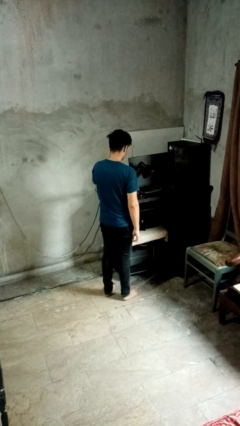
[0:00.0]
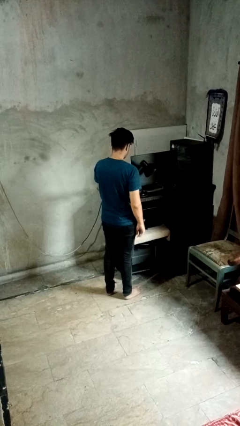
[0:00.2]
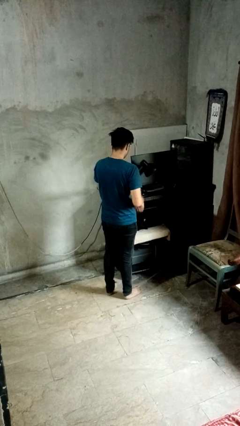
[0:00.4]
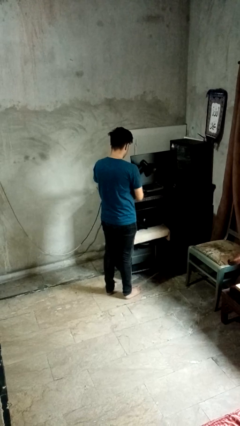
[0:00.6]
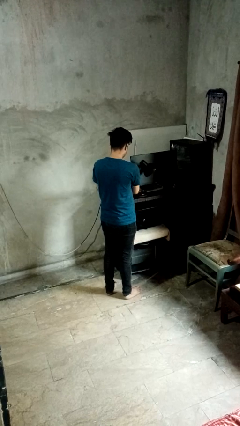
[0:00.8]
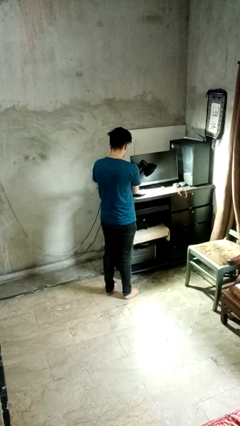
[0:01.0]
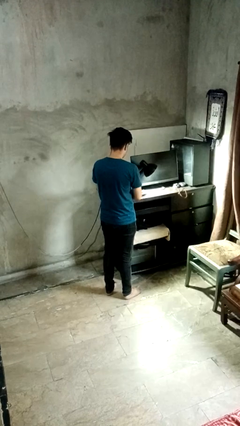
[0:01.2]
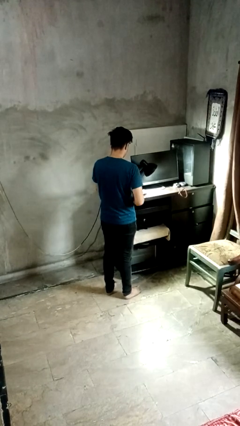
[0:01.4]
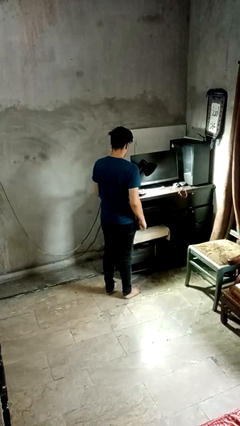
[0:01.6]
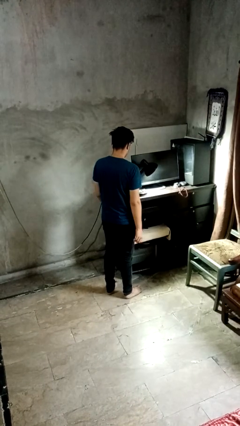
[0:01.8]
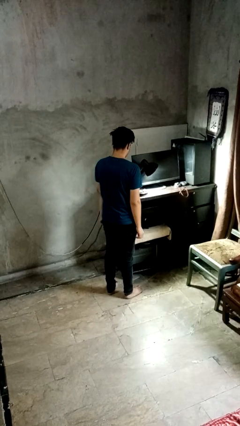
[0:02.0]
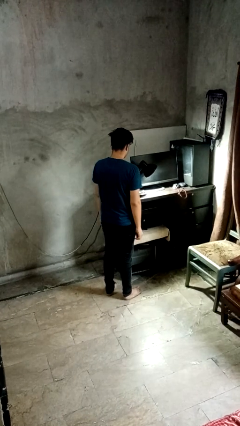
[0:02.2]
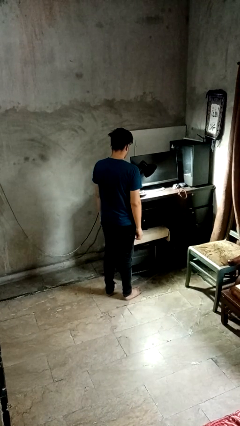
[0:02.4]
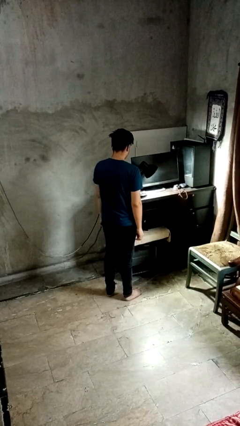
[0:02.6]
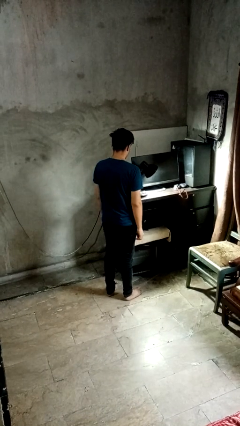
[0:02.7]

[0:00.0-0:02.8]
person turns on lamp

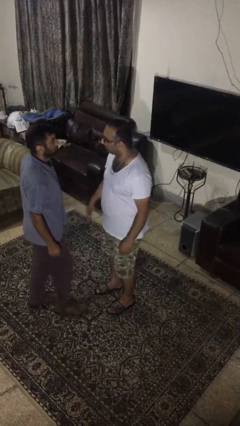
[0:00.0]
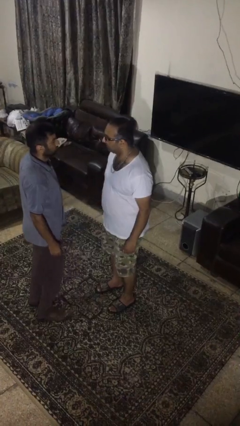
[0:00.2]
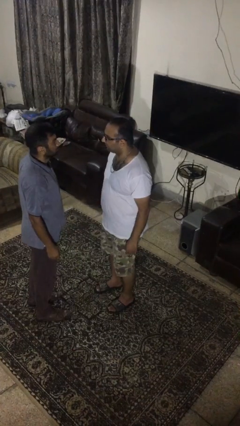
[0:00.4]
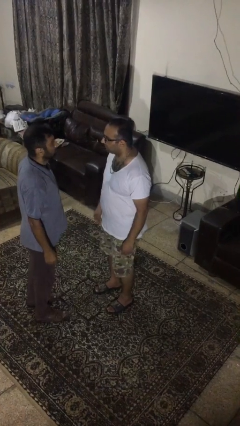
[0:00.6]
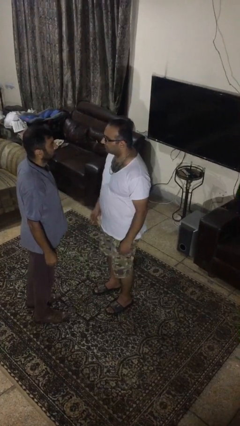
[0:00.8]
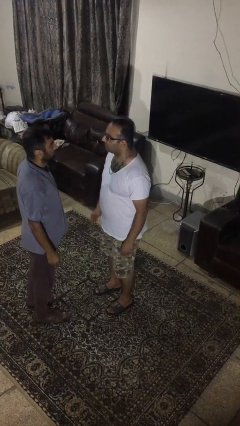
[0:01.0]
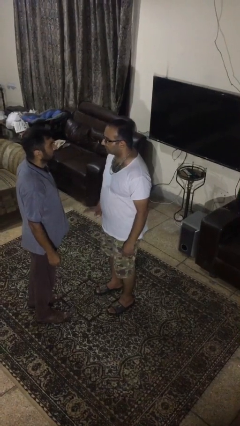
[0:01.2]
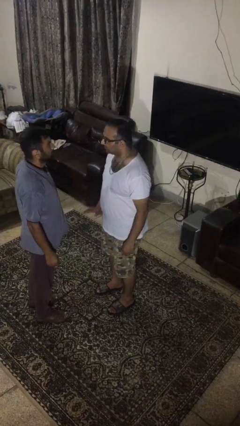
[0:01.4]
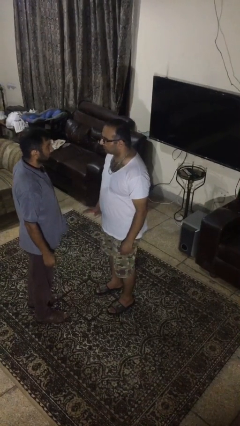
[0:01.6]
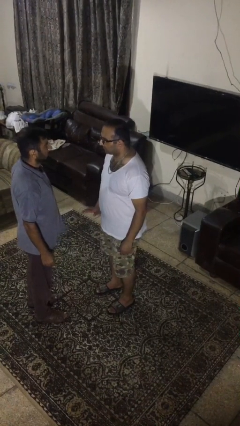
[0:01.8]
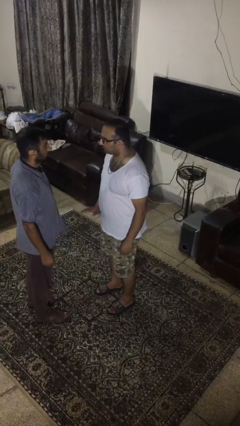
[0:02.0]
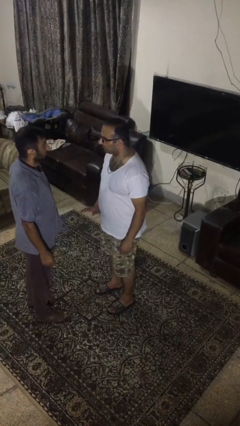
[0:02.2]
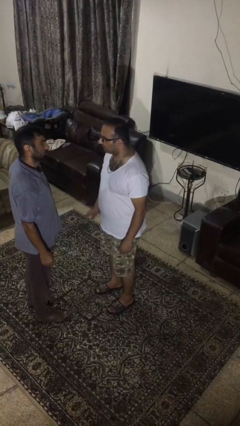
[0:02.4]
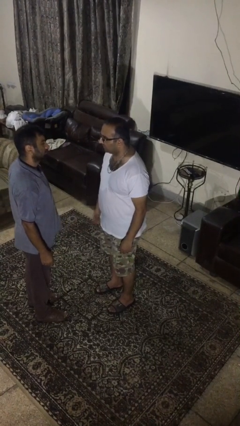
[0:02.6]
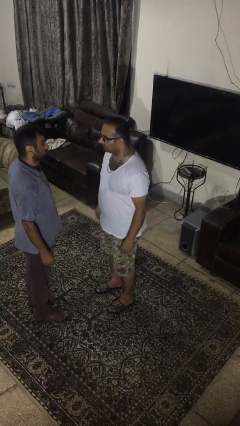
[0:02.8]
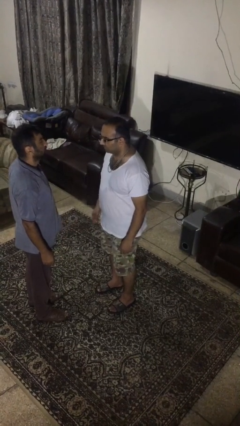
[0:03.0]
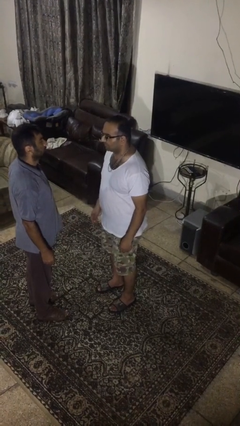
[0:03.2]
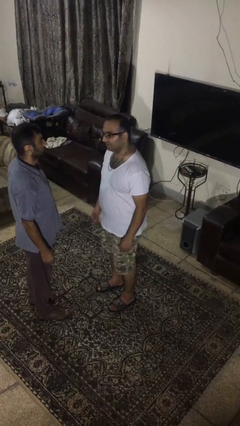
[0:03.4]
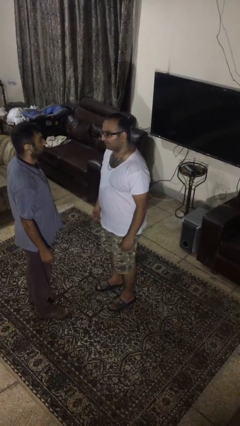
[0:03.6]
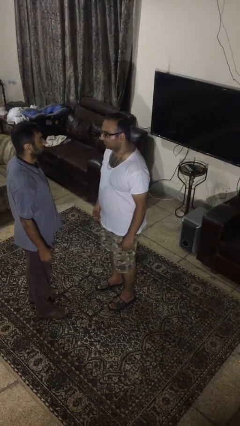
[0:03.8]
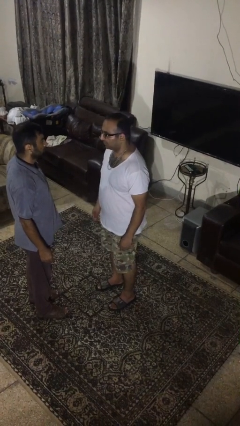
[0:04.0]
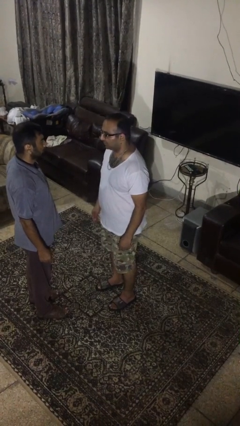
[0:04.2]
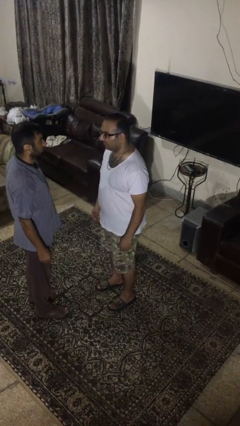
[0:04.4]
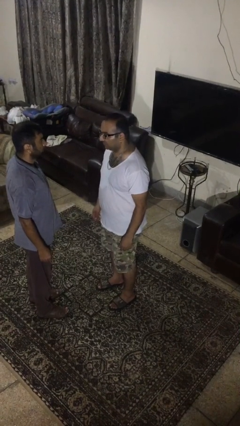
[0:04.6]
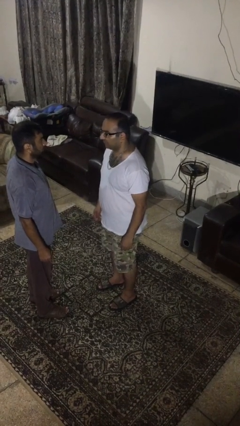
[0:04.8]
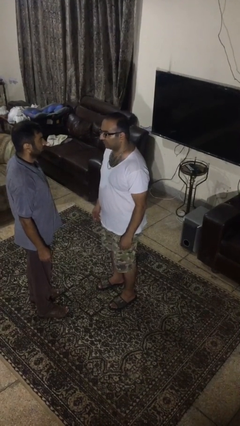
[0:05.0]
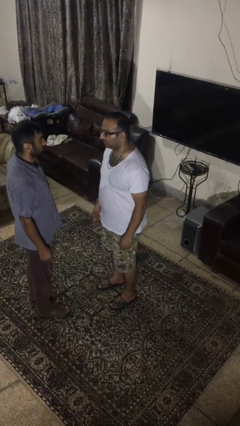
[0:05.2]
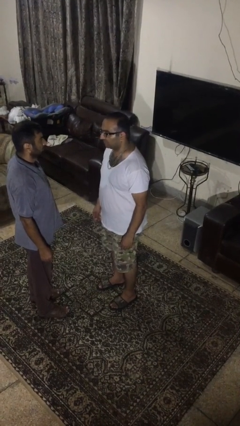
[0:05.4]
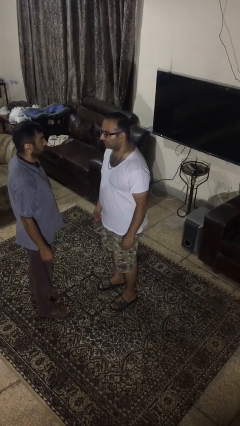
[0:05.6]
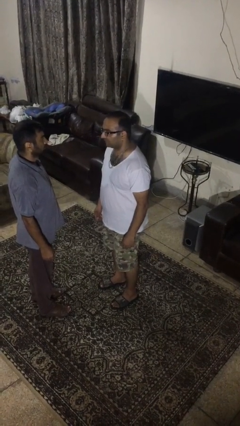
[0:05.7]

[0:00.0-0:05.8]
person talks to person

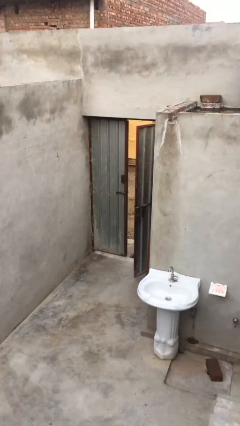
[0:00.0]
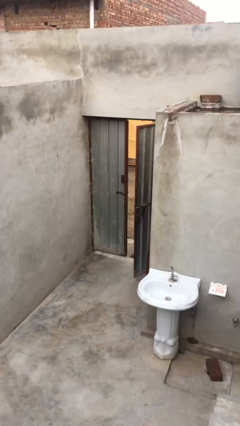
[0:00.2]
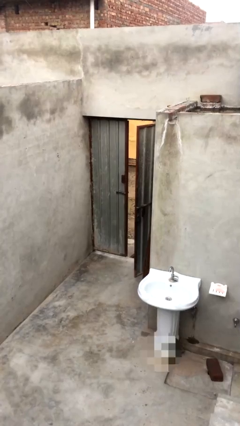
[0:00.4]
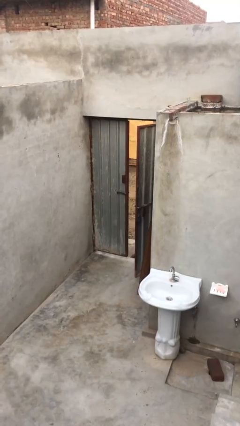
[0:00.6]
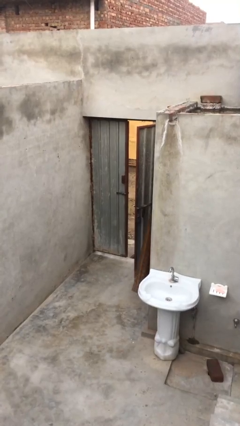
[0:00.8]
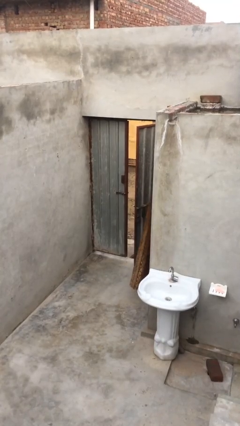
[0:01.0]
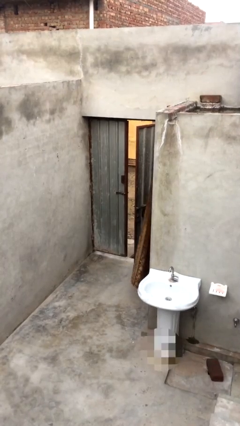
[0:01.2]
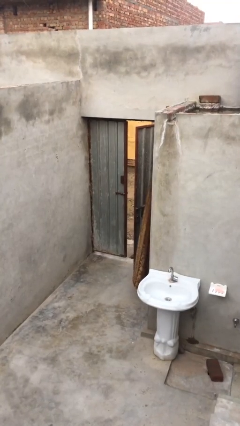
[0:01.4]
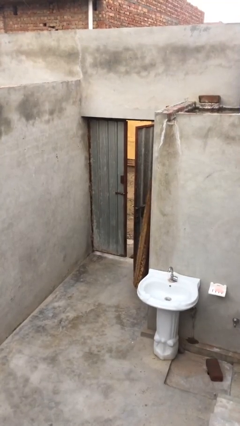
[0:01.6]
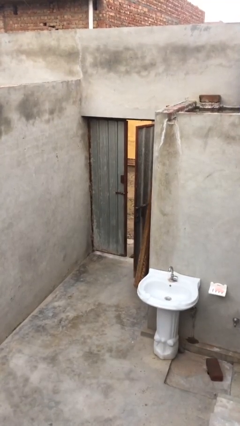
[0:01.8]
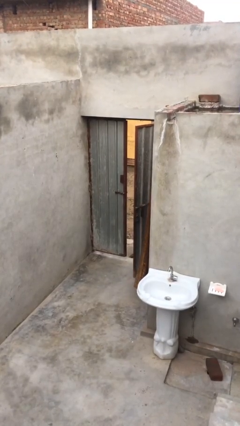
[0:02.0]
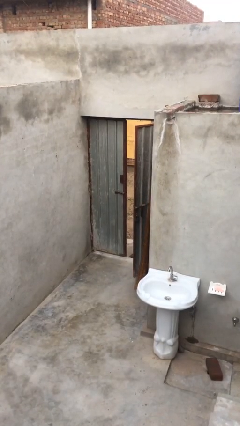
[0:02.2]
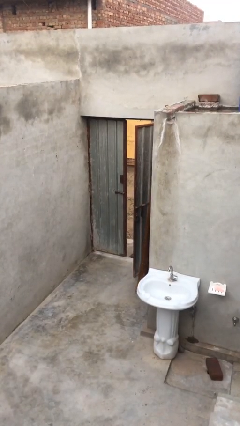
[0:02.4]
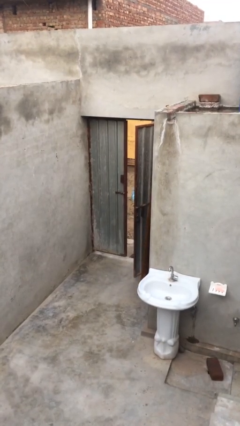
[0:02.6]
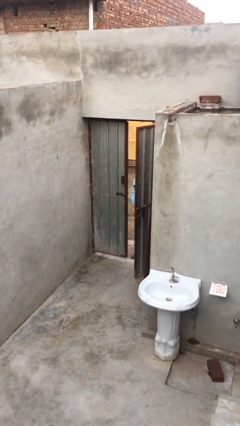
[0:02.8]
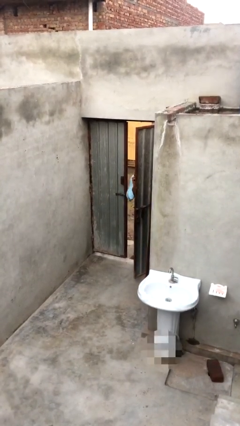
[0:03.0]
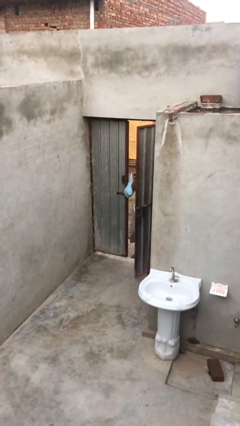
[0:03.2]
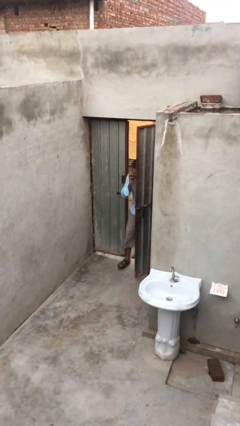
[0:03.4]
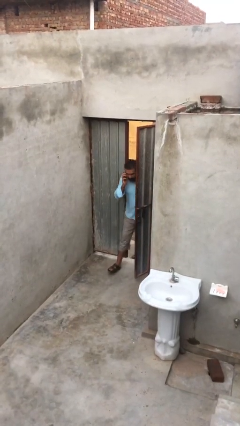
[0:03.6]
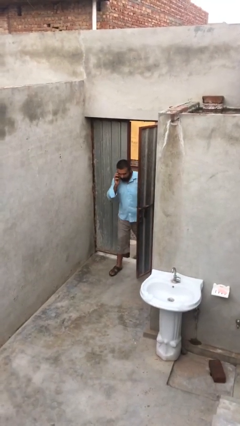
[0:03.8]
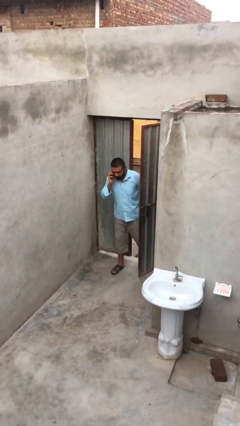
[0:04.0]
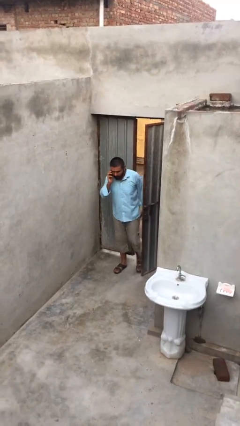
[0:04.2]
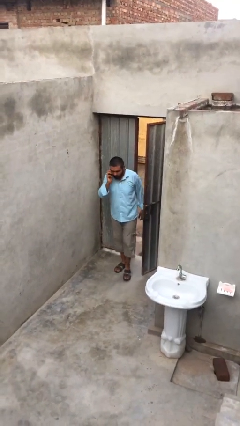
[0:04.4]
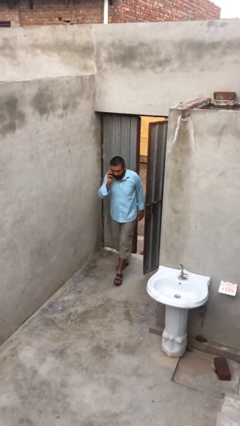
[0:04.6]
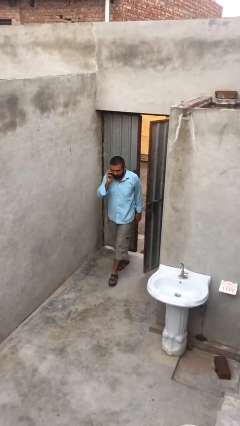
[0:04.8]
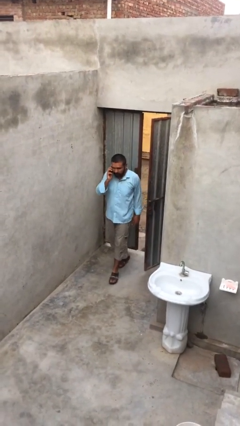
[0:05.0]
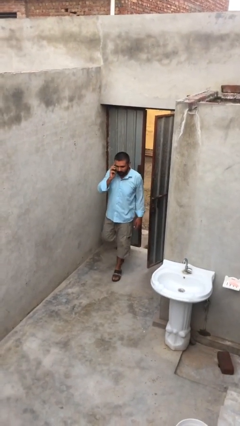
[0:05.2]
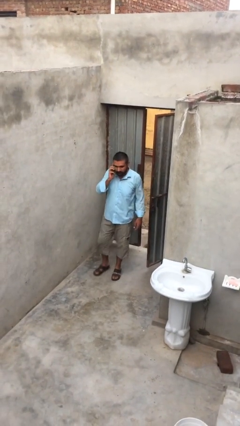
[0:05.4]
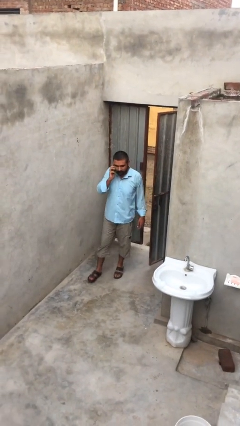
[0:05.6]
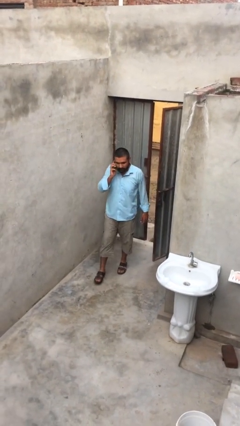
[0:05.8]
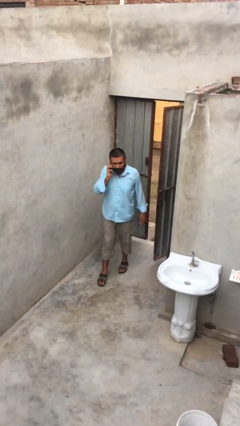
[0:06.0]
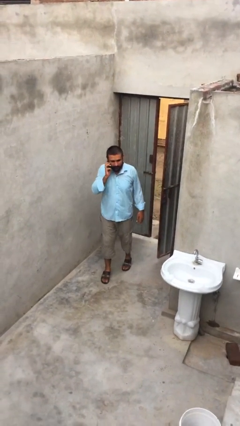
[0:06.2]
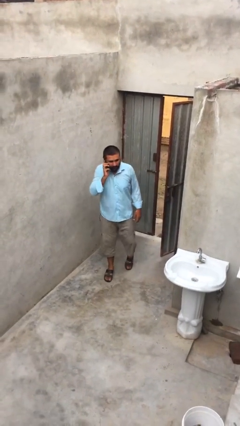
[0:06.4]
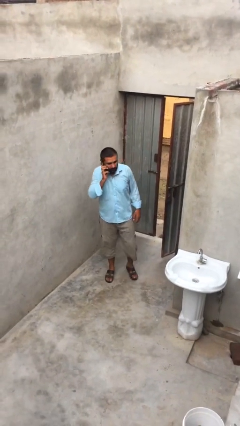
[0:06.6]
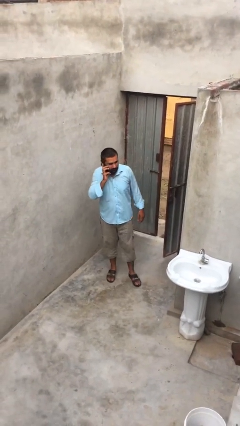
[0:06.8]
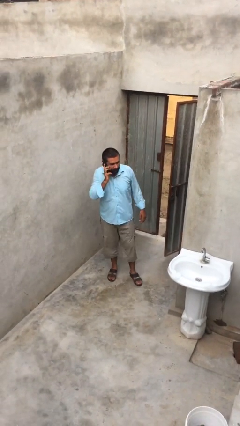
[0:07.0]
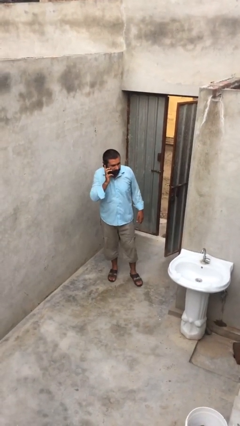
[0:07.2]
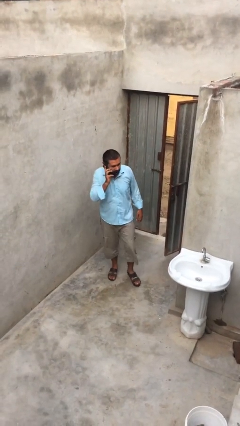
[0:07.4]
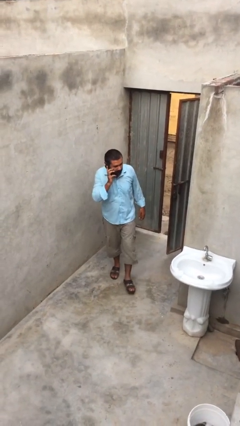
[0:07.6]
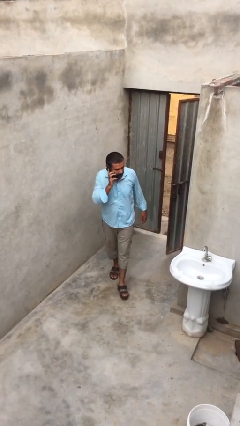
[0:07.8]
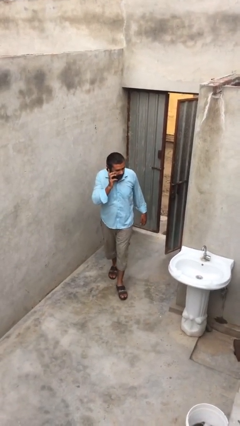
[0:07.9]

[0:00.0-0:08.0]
person enters scene through structure

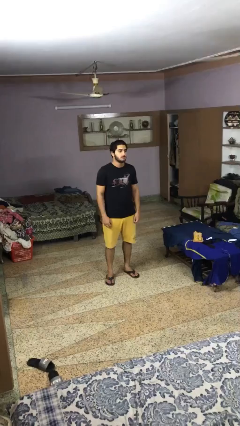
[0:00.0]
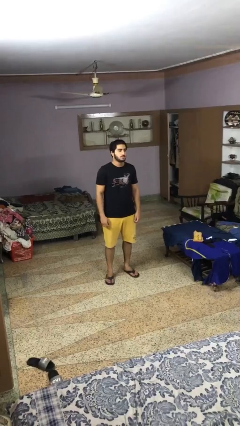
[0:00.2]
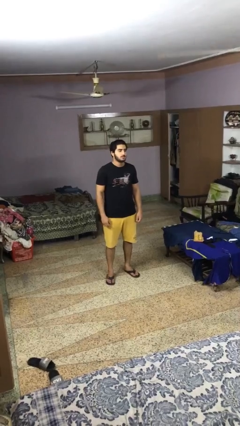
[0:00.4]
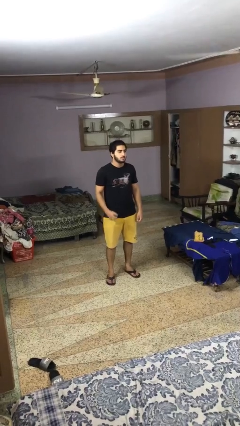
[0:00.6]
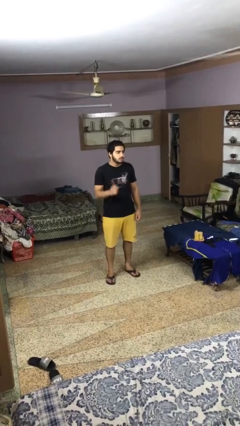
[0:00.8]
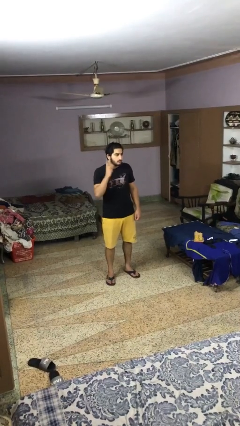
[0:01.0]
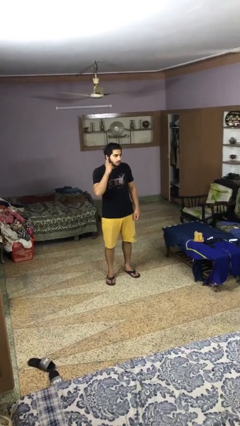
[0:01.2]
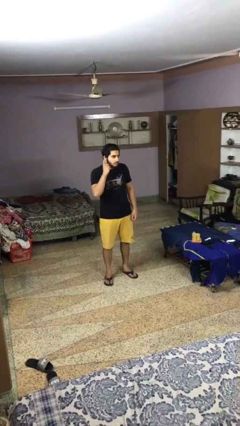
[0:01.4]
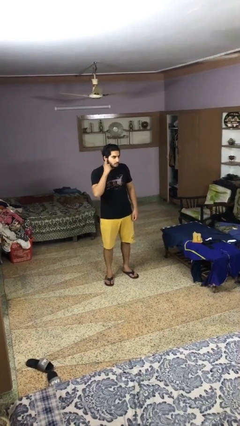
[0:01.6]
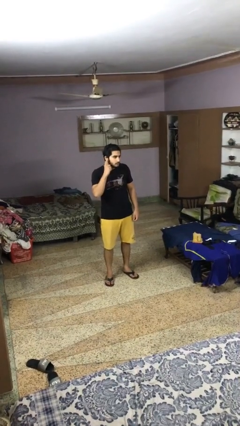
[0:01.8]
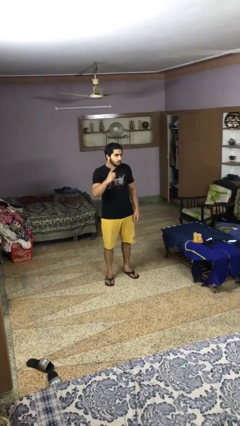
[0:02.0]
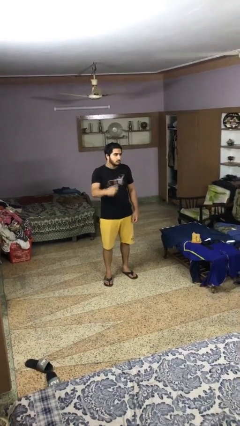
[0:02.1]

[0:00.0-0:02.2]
person gestures listen closely
